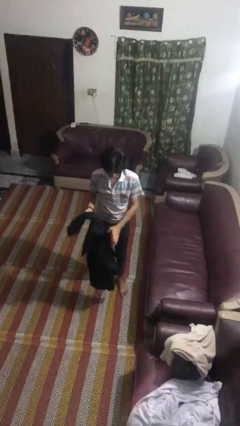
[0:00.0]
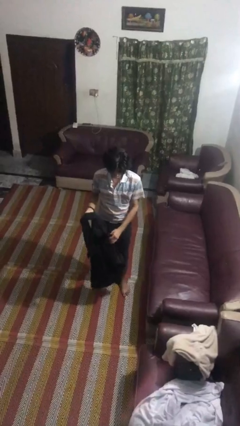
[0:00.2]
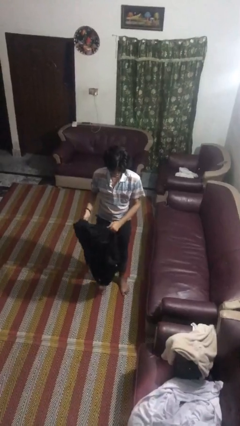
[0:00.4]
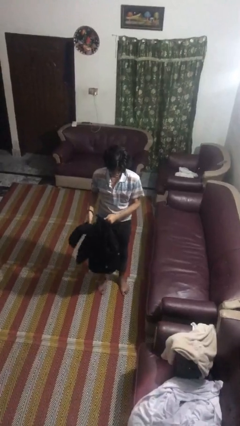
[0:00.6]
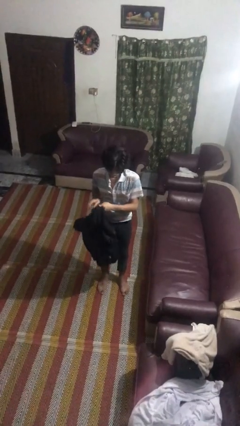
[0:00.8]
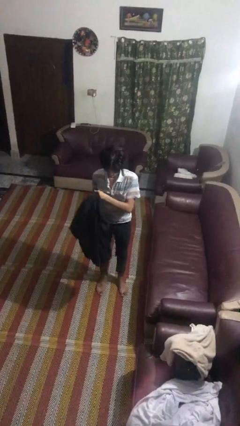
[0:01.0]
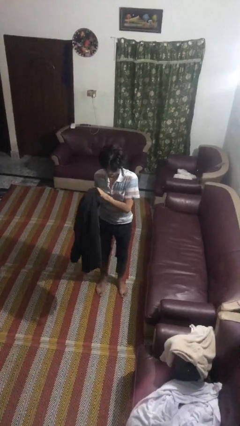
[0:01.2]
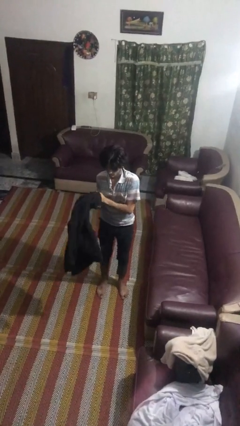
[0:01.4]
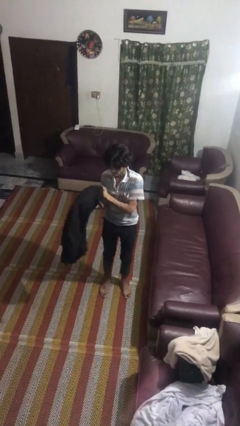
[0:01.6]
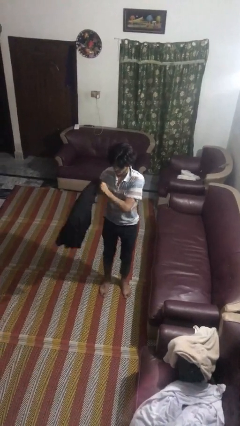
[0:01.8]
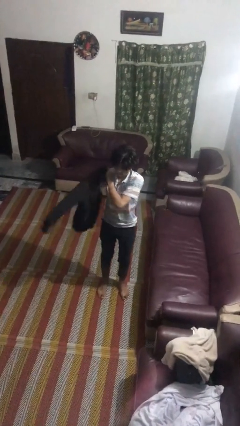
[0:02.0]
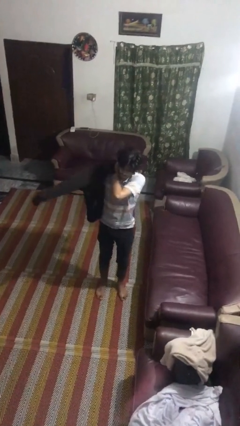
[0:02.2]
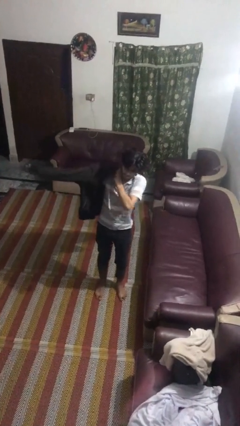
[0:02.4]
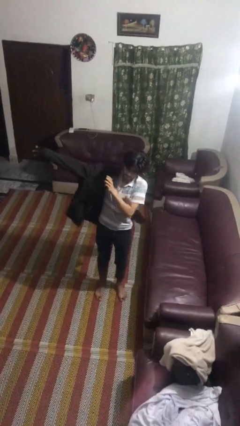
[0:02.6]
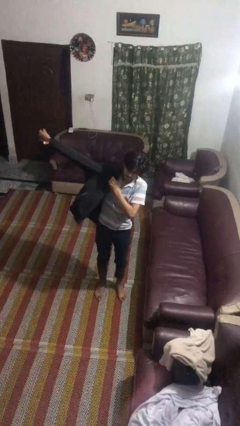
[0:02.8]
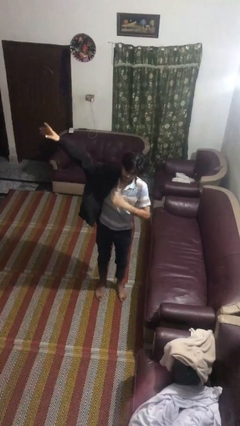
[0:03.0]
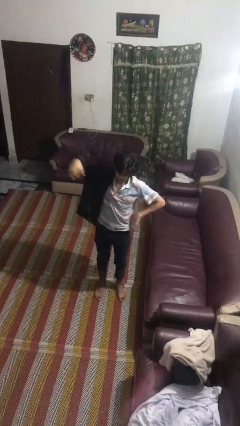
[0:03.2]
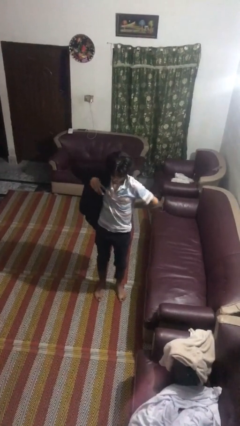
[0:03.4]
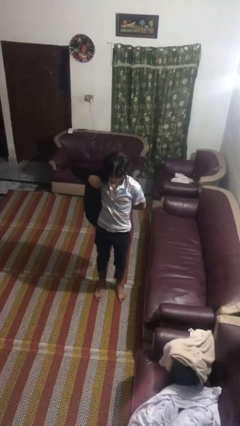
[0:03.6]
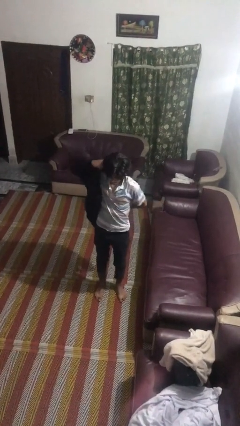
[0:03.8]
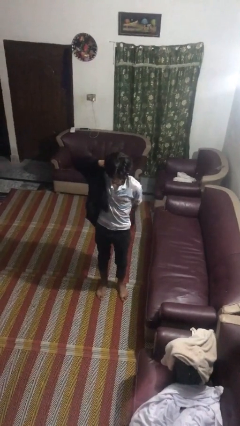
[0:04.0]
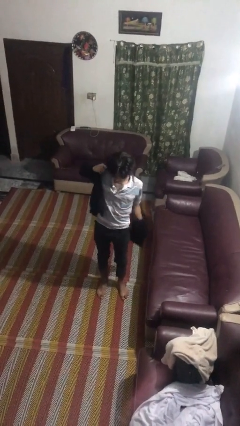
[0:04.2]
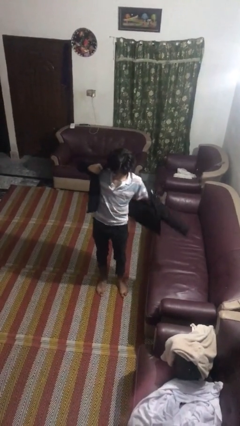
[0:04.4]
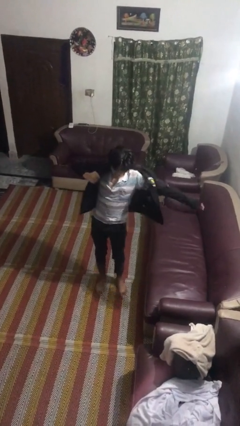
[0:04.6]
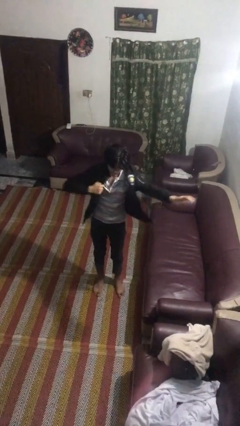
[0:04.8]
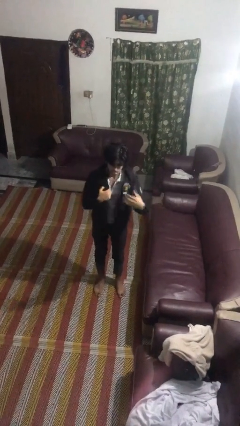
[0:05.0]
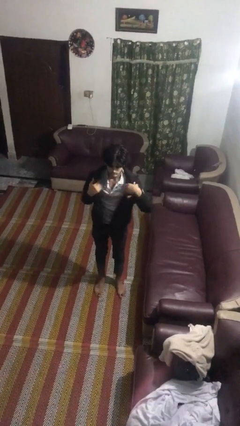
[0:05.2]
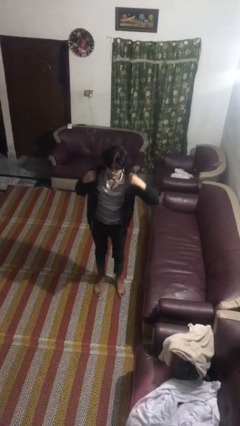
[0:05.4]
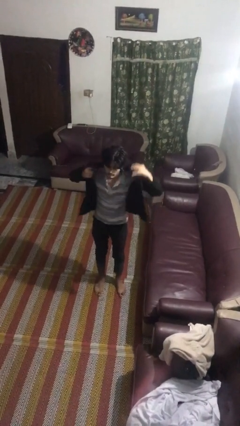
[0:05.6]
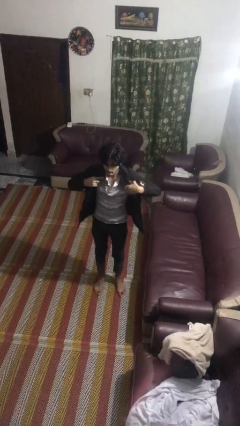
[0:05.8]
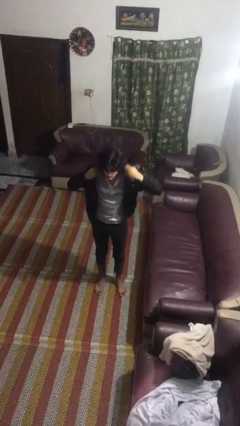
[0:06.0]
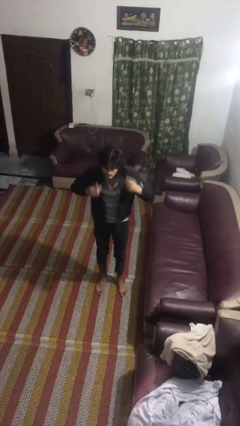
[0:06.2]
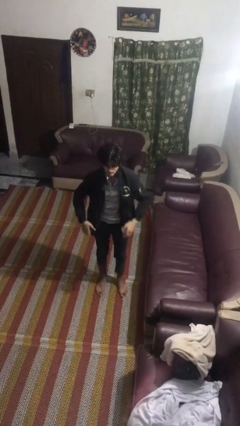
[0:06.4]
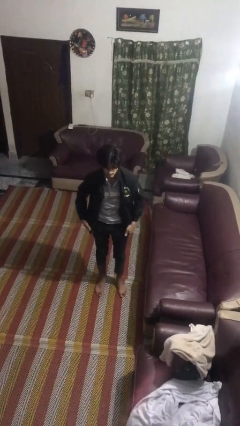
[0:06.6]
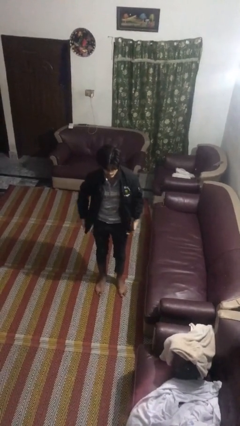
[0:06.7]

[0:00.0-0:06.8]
person puts on jacket

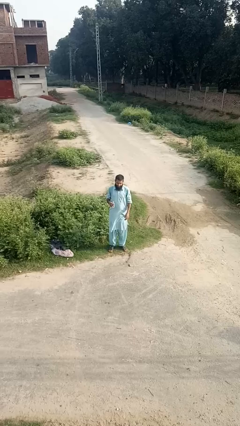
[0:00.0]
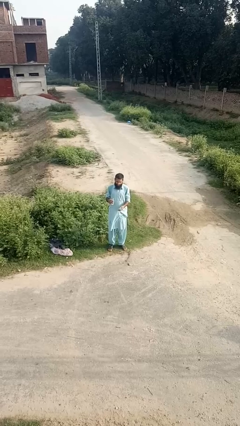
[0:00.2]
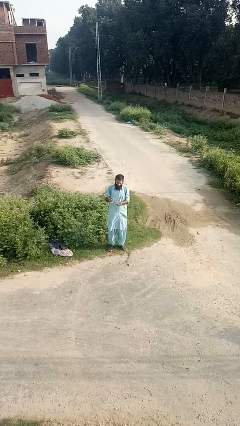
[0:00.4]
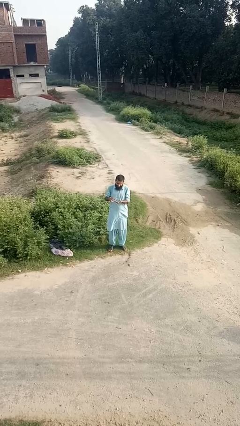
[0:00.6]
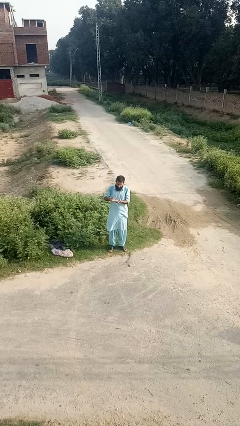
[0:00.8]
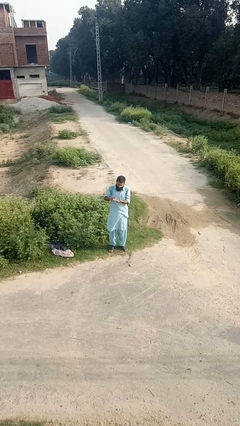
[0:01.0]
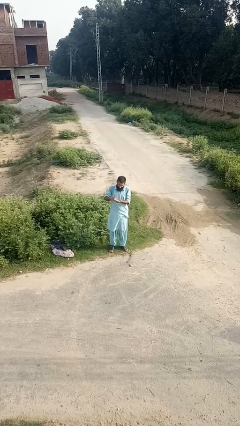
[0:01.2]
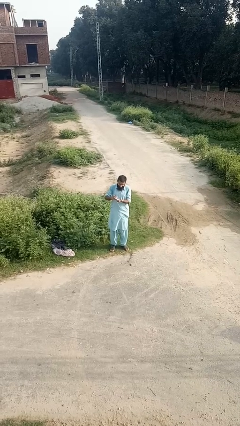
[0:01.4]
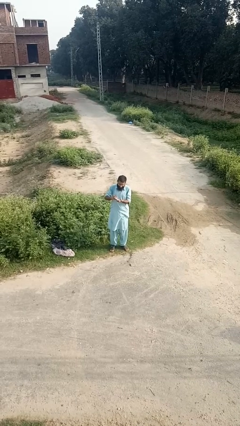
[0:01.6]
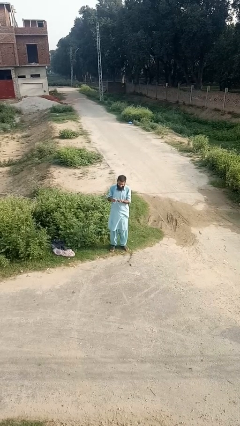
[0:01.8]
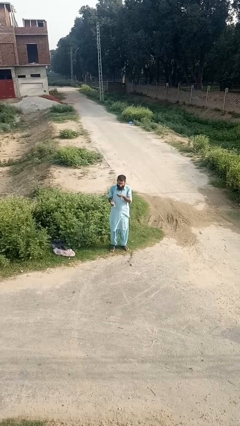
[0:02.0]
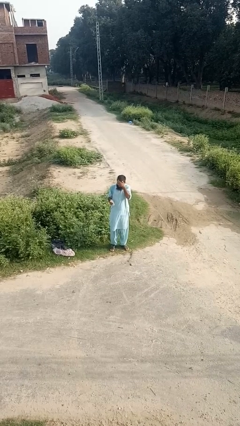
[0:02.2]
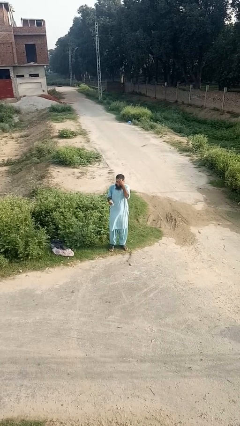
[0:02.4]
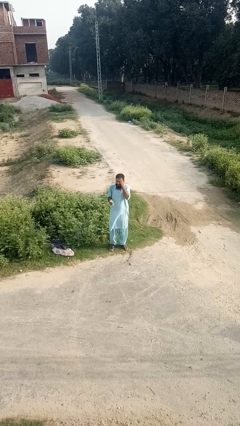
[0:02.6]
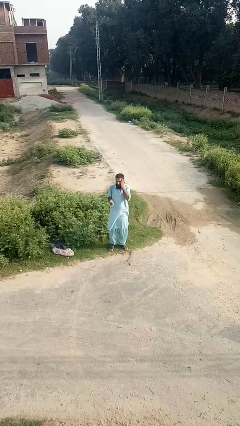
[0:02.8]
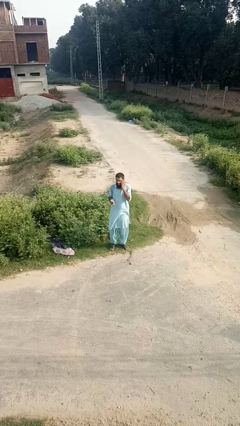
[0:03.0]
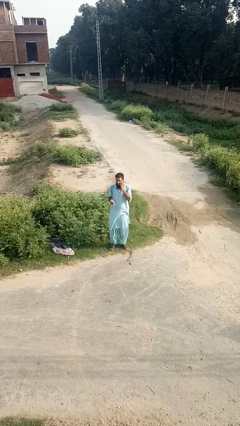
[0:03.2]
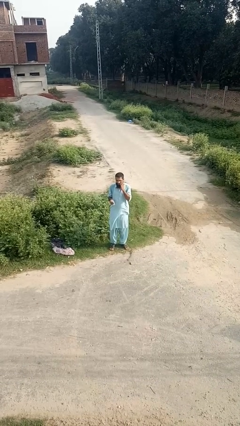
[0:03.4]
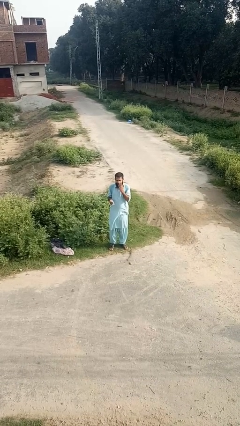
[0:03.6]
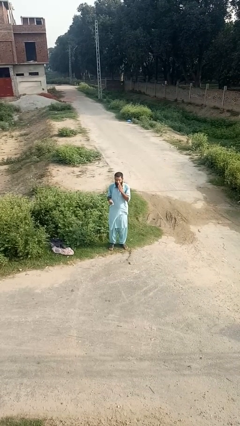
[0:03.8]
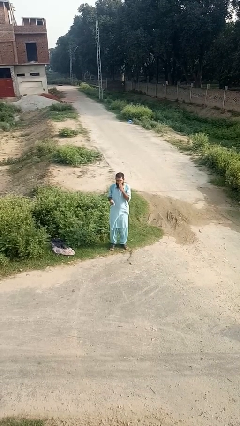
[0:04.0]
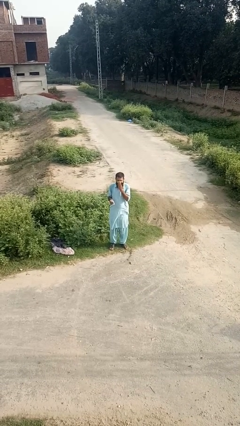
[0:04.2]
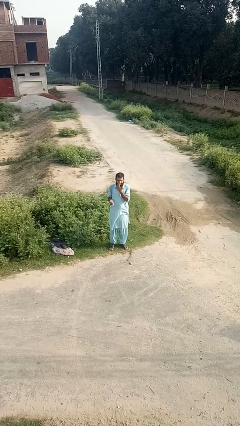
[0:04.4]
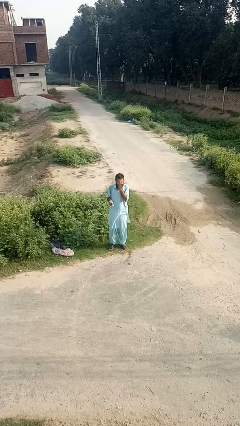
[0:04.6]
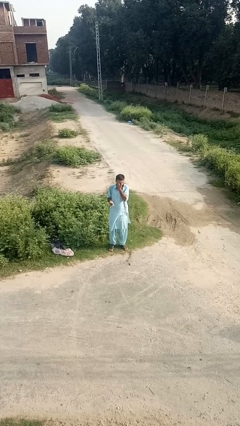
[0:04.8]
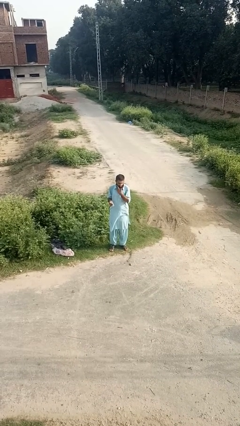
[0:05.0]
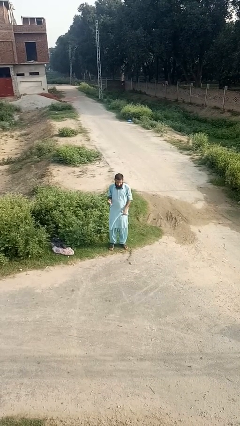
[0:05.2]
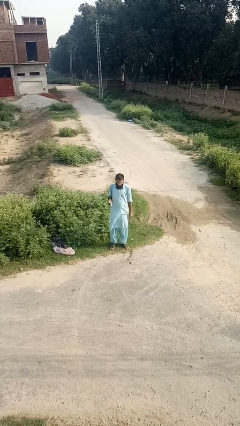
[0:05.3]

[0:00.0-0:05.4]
person applies facial moisturizer

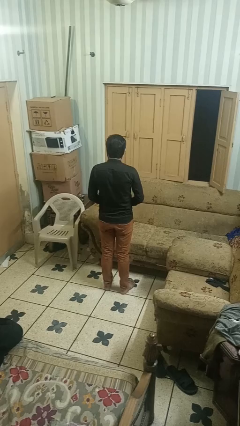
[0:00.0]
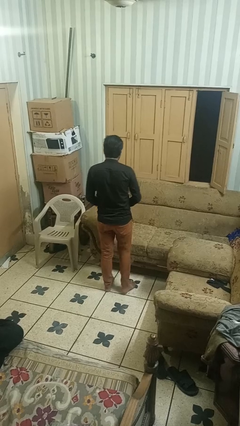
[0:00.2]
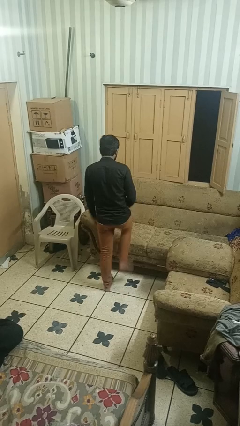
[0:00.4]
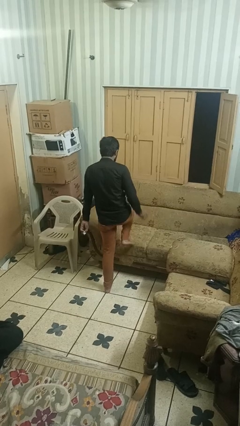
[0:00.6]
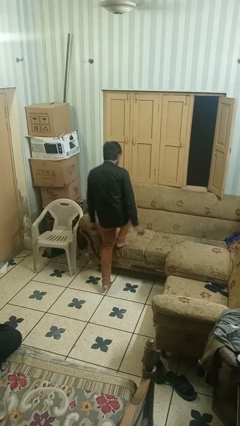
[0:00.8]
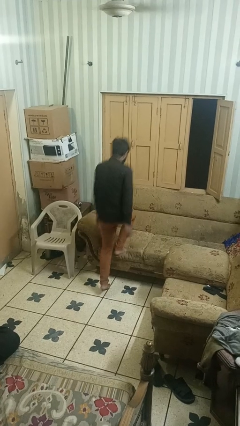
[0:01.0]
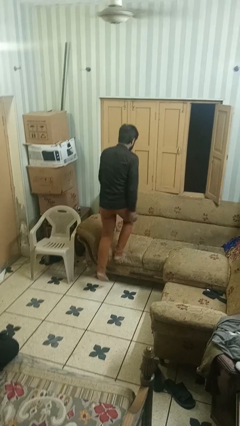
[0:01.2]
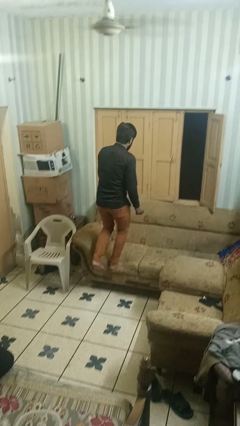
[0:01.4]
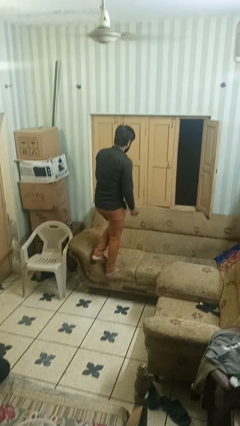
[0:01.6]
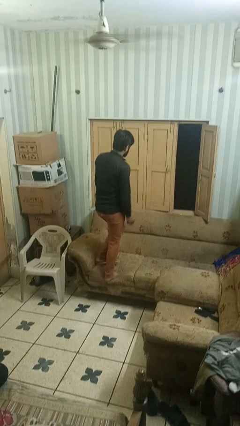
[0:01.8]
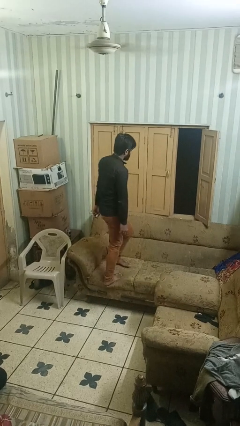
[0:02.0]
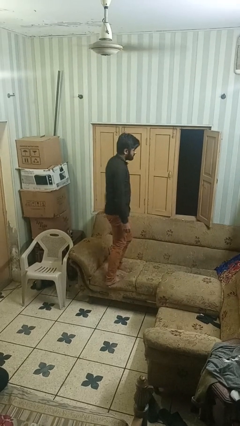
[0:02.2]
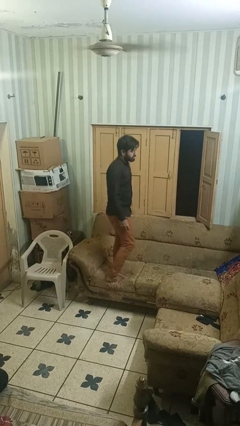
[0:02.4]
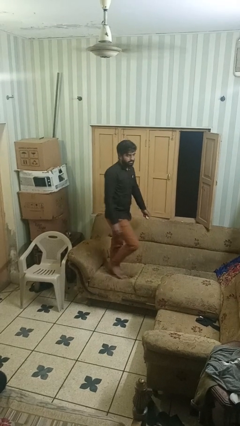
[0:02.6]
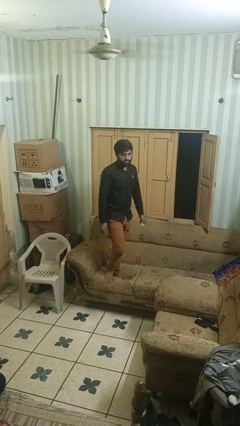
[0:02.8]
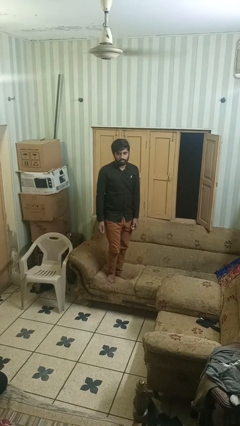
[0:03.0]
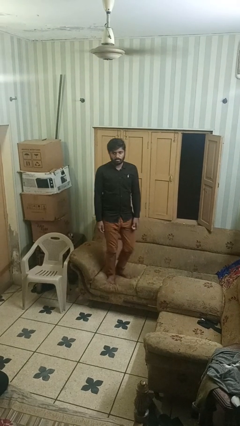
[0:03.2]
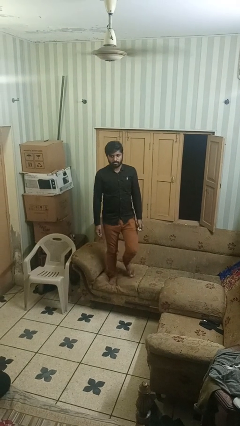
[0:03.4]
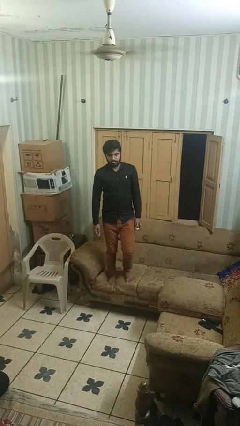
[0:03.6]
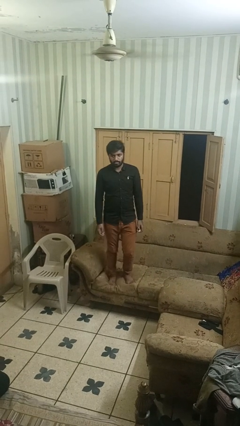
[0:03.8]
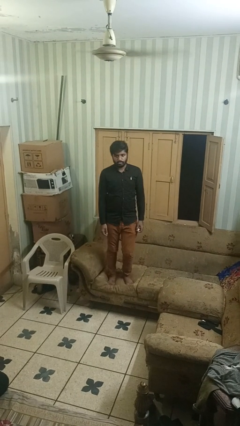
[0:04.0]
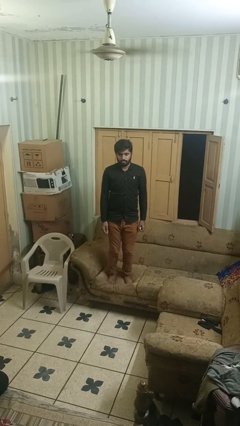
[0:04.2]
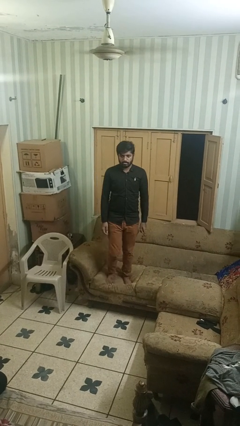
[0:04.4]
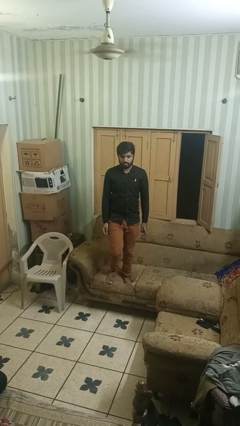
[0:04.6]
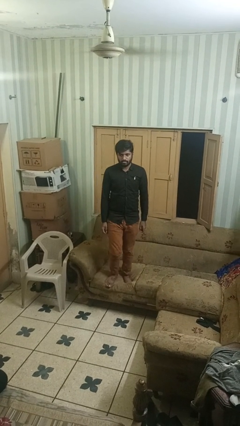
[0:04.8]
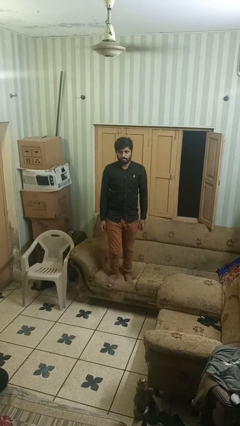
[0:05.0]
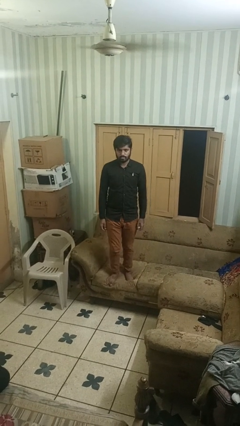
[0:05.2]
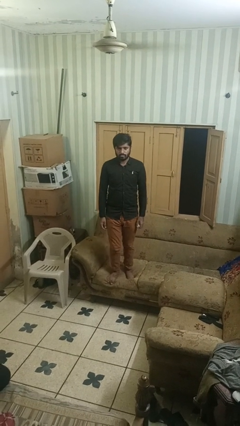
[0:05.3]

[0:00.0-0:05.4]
person climbs on couch
